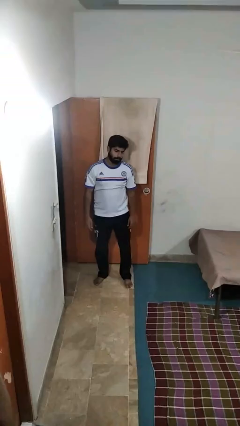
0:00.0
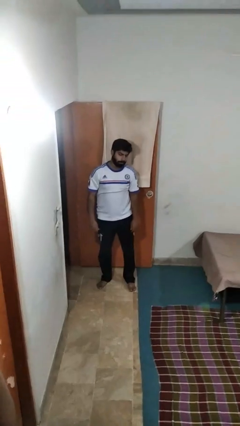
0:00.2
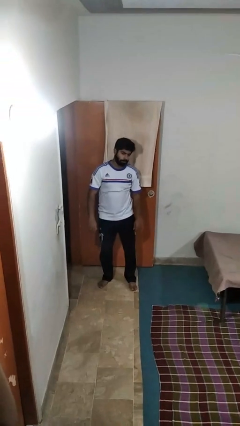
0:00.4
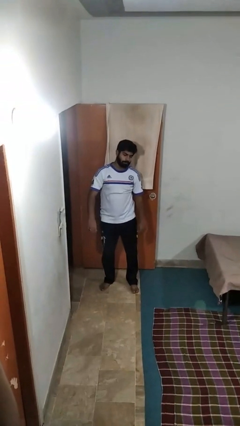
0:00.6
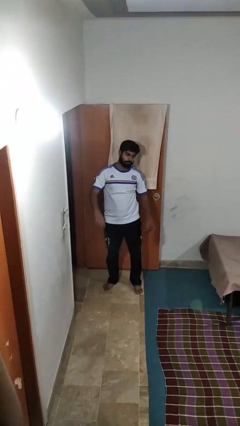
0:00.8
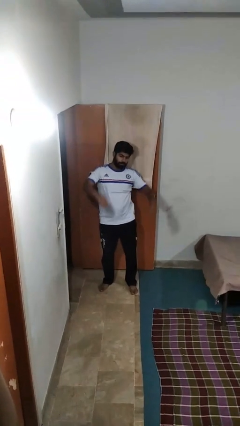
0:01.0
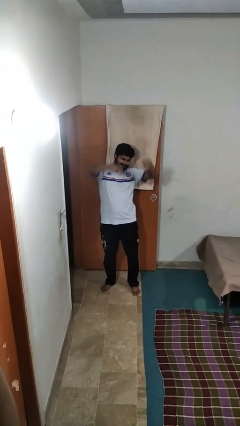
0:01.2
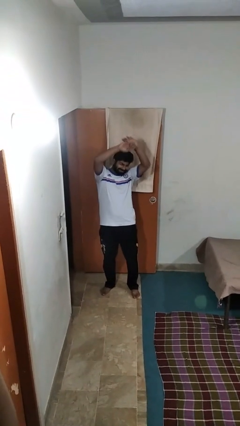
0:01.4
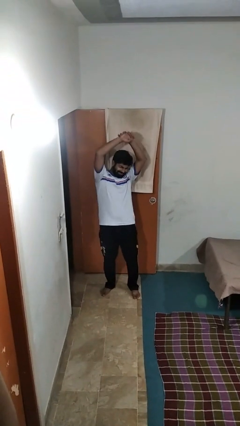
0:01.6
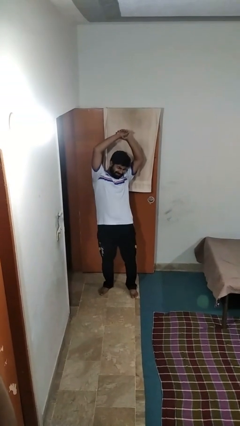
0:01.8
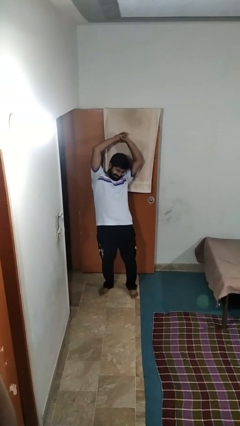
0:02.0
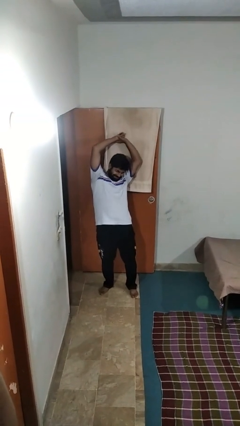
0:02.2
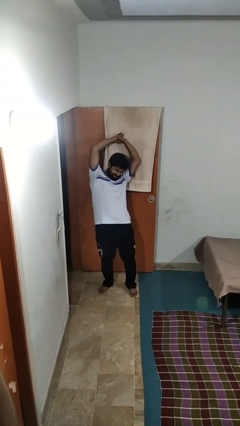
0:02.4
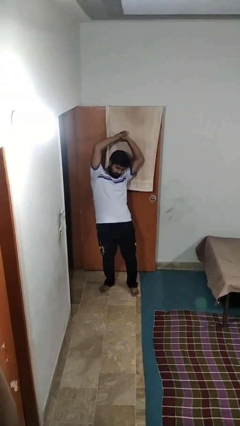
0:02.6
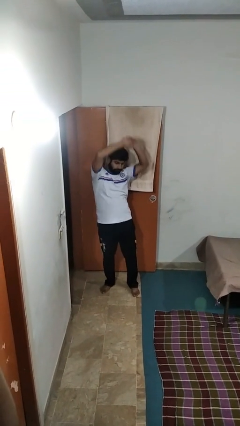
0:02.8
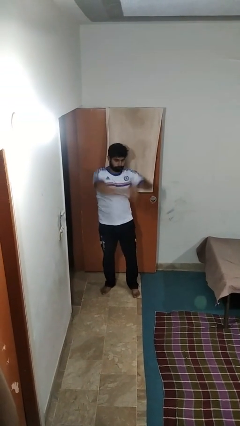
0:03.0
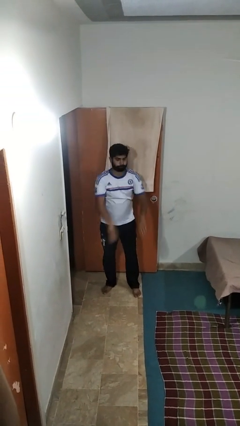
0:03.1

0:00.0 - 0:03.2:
person stretches arms over head

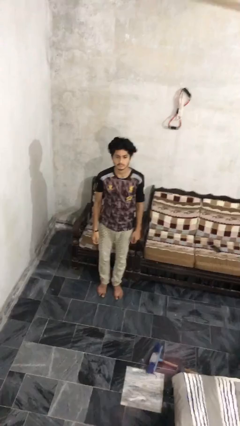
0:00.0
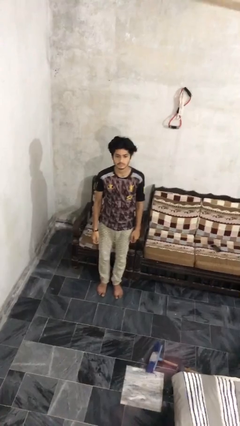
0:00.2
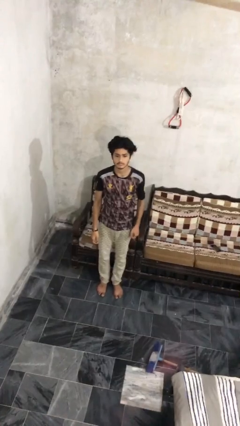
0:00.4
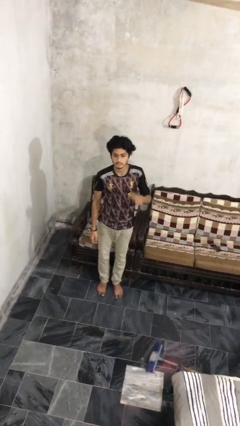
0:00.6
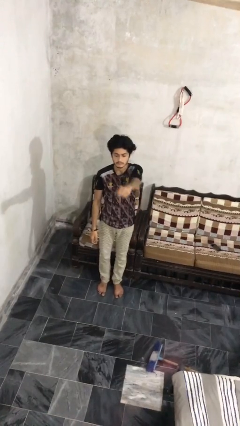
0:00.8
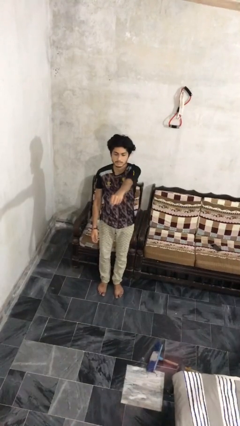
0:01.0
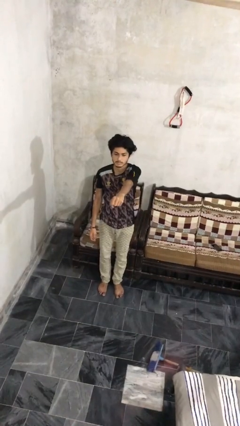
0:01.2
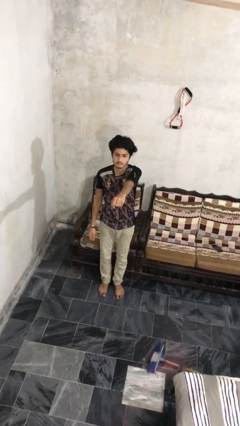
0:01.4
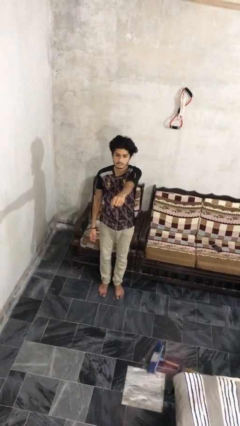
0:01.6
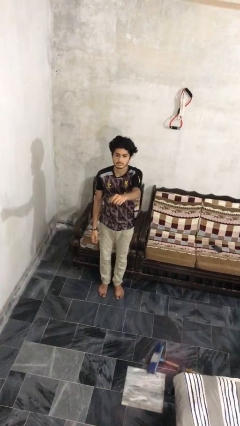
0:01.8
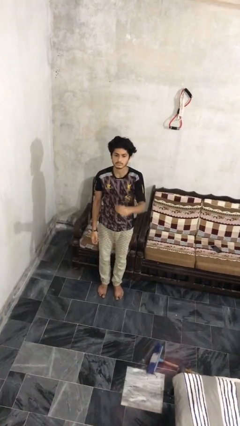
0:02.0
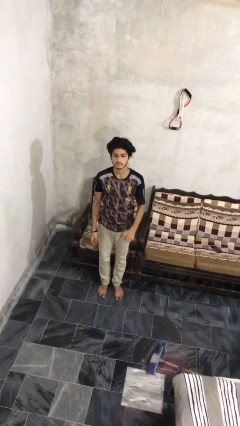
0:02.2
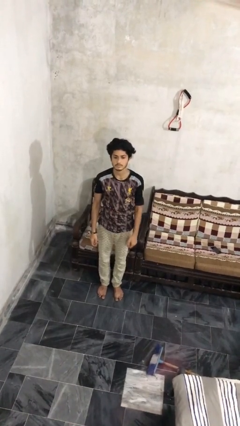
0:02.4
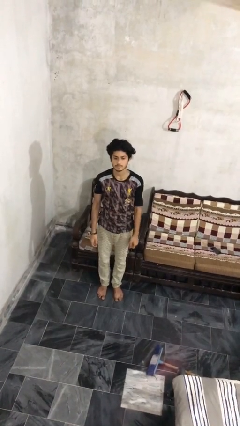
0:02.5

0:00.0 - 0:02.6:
person punches

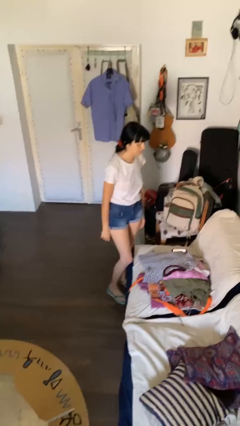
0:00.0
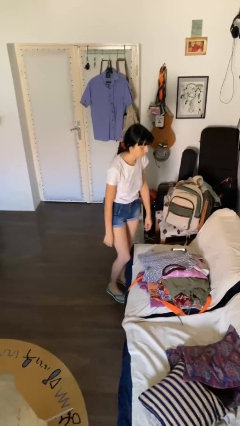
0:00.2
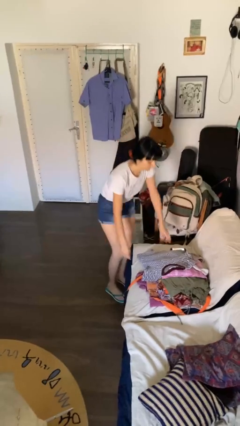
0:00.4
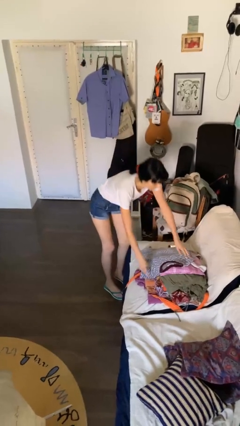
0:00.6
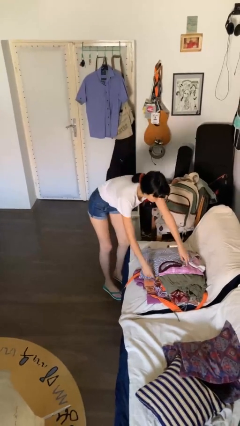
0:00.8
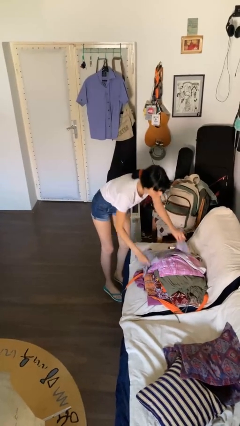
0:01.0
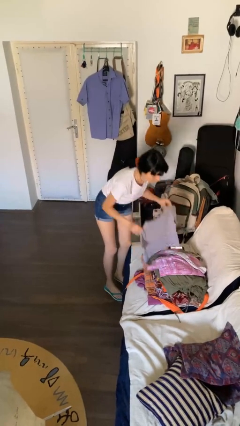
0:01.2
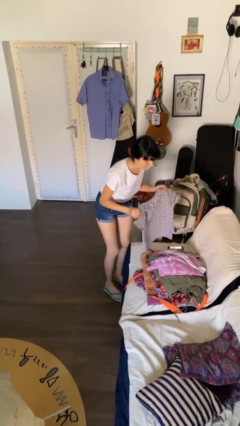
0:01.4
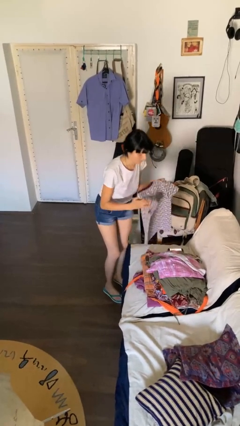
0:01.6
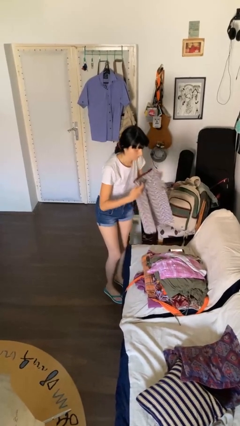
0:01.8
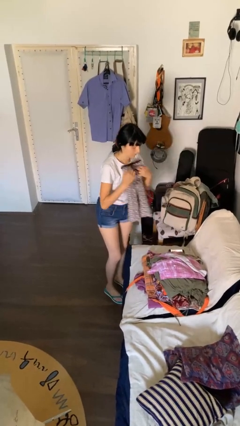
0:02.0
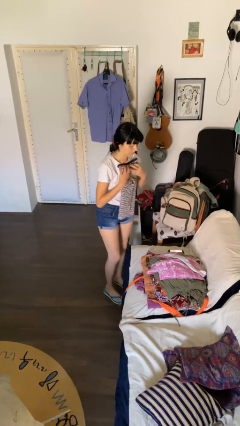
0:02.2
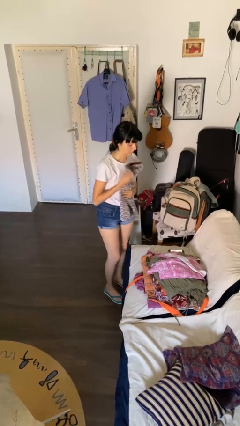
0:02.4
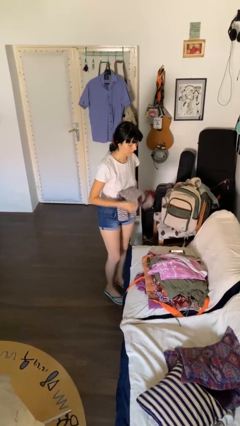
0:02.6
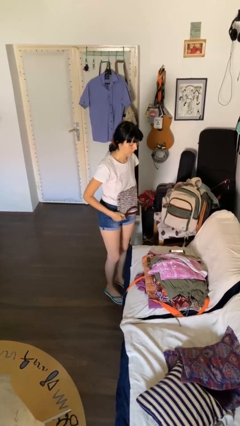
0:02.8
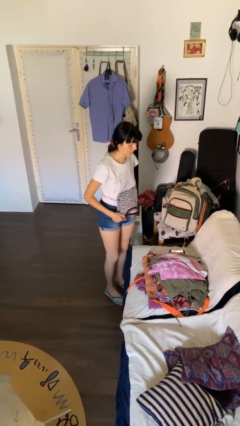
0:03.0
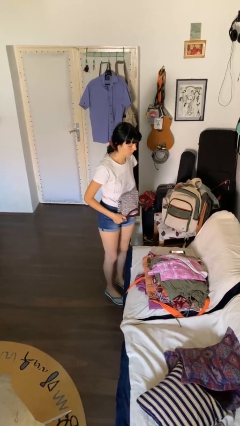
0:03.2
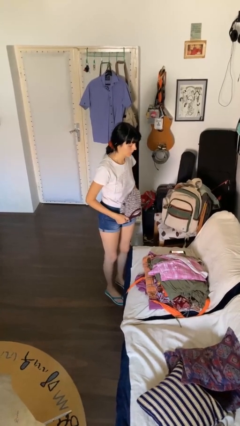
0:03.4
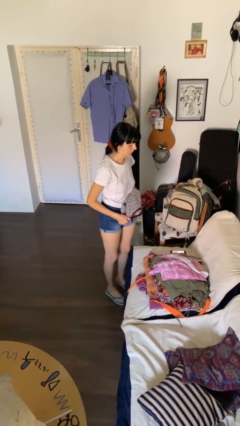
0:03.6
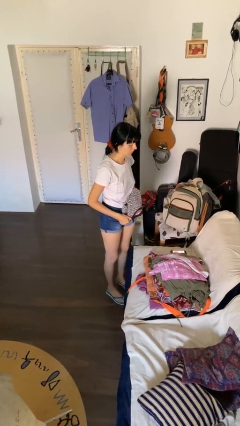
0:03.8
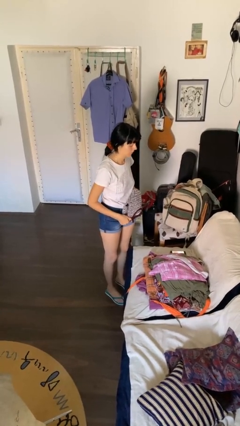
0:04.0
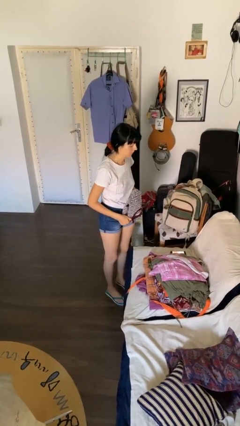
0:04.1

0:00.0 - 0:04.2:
person folds shirt

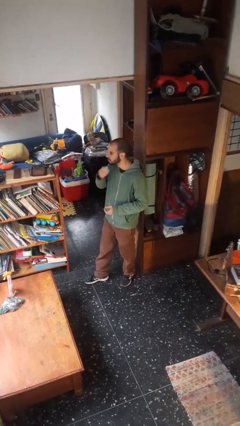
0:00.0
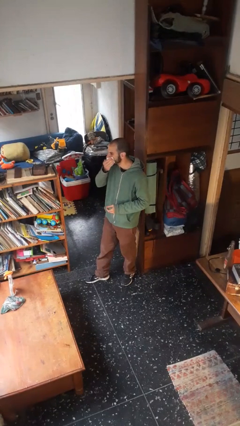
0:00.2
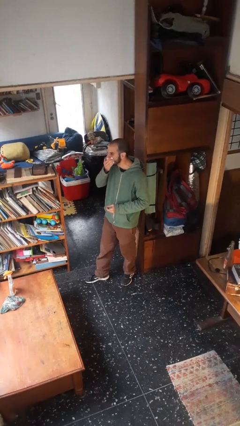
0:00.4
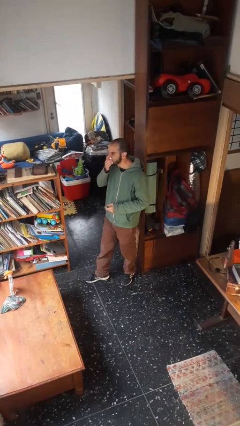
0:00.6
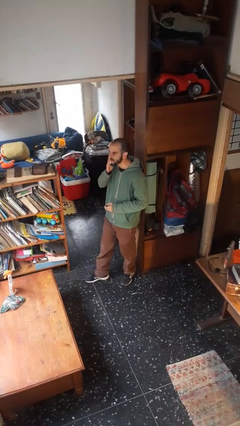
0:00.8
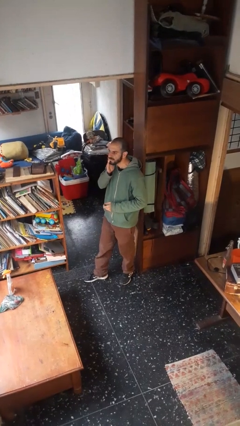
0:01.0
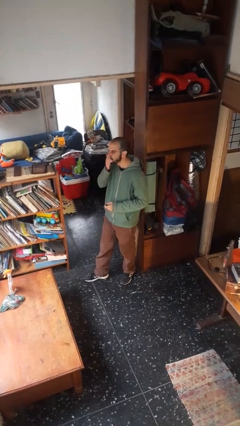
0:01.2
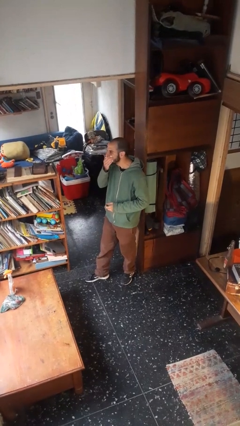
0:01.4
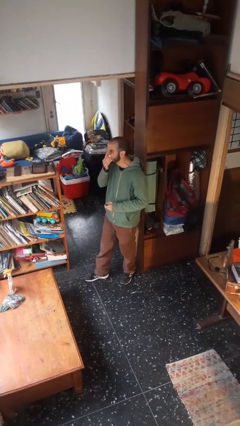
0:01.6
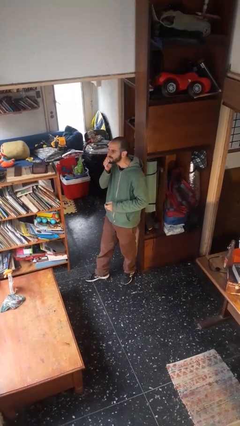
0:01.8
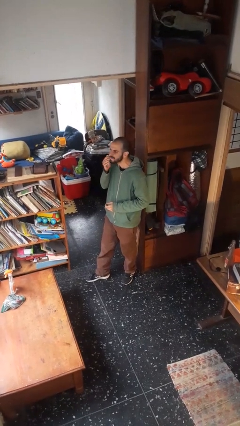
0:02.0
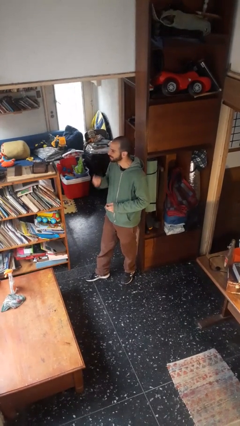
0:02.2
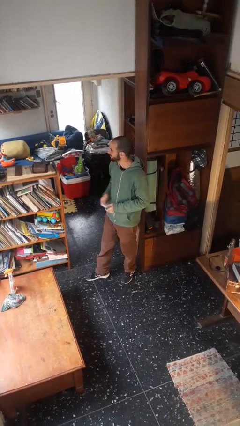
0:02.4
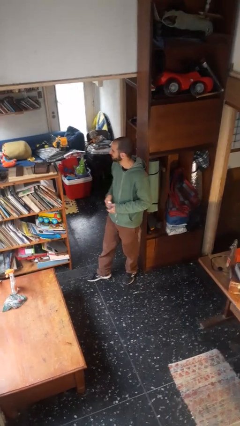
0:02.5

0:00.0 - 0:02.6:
person wipes mouth with napkin

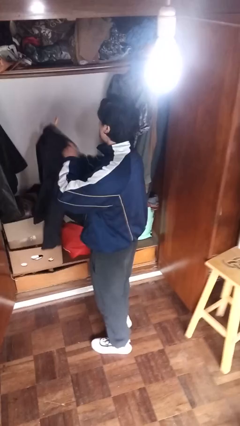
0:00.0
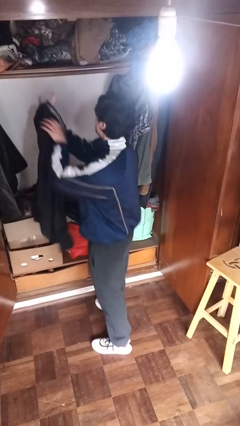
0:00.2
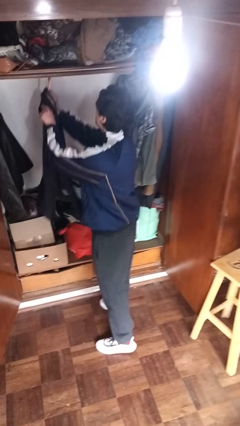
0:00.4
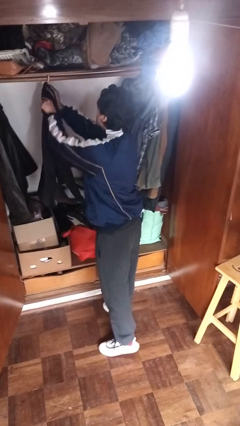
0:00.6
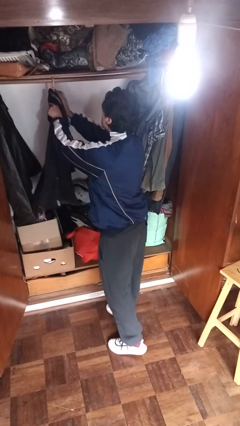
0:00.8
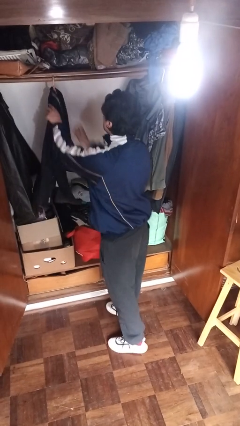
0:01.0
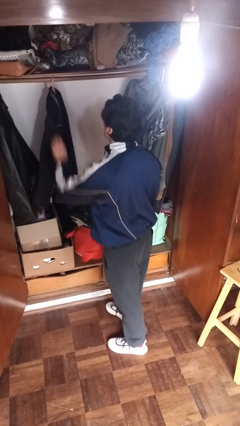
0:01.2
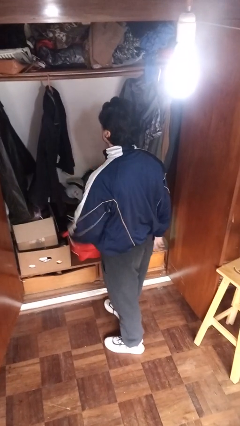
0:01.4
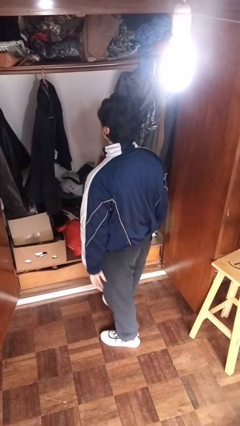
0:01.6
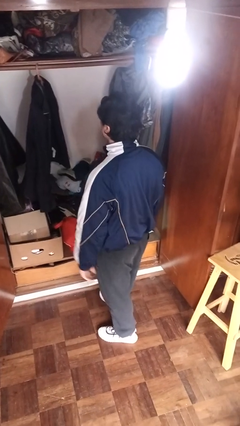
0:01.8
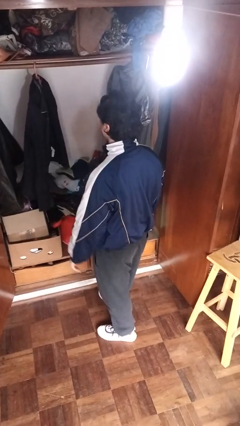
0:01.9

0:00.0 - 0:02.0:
person puts clothes into closet

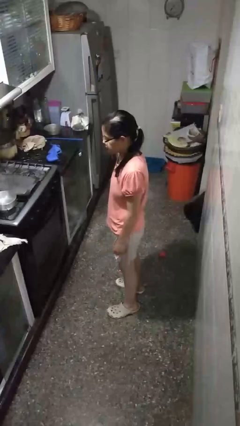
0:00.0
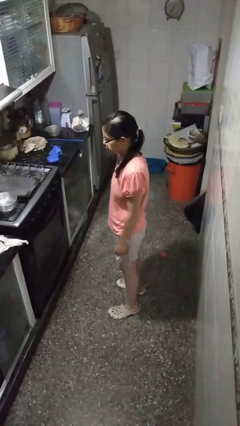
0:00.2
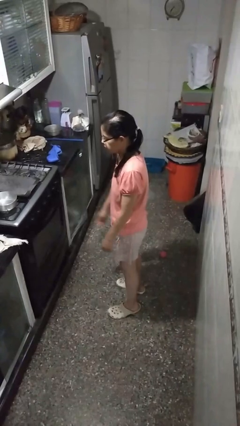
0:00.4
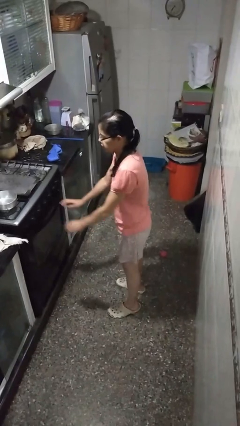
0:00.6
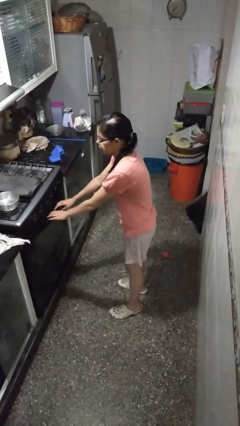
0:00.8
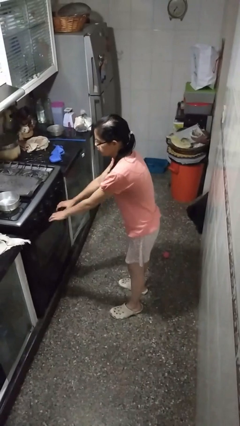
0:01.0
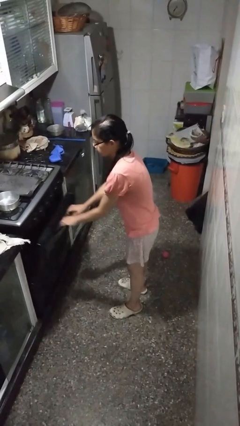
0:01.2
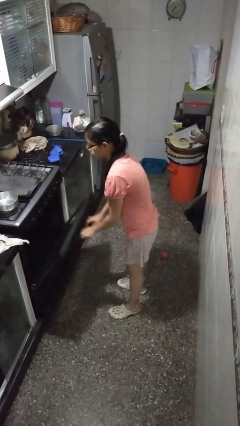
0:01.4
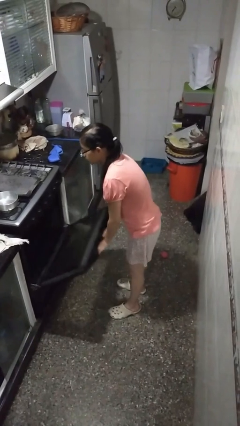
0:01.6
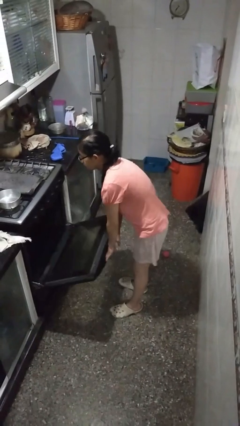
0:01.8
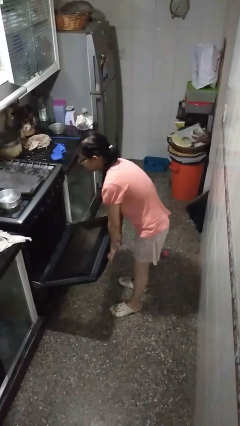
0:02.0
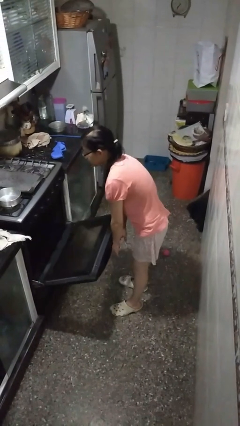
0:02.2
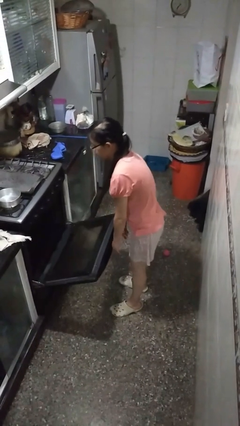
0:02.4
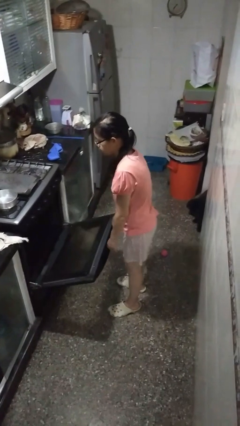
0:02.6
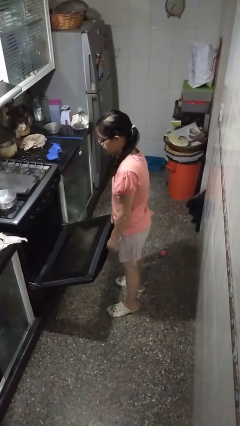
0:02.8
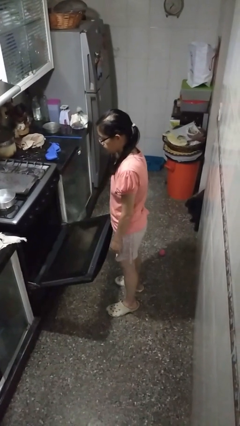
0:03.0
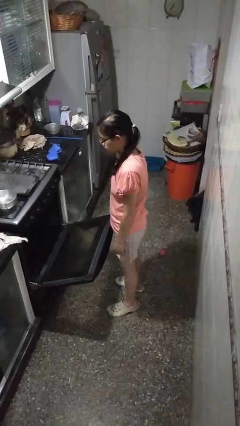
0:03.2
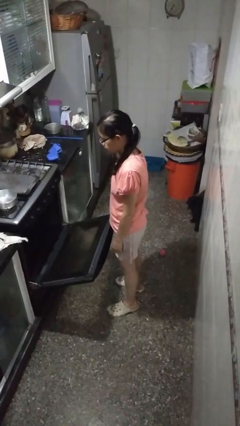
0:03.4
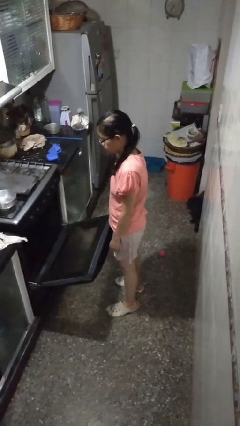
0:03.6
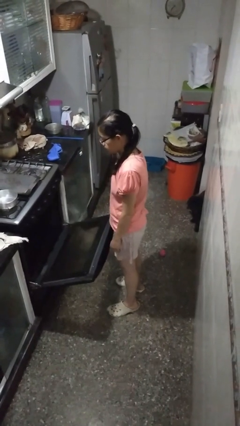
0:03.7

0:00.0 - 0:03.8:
person opens oven door
